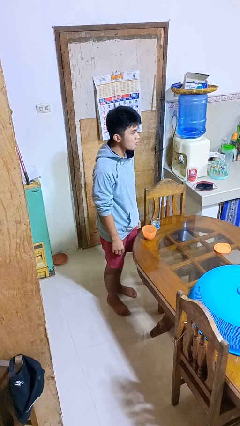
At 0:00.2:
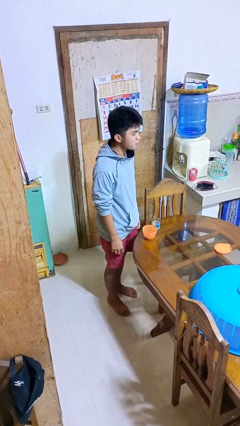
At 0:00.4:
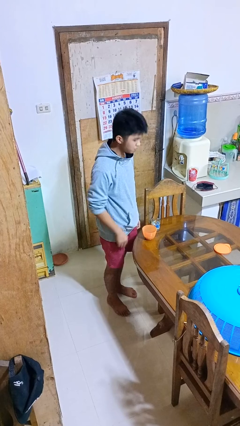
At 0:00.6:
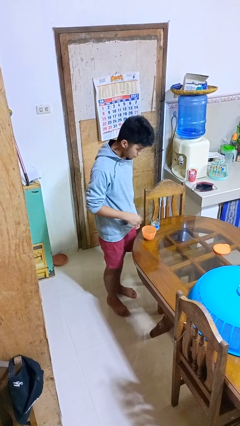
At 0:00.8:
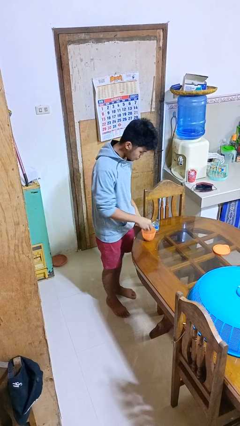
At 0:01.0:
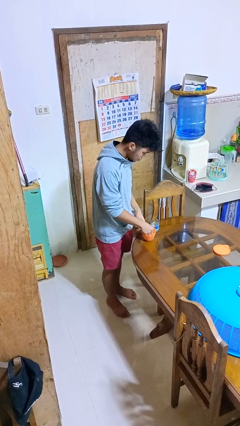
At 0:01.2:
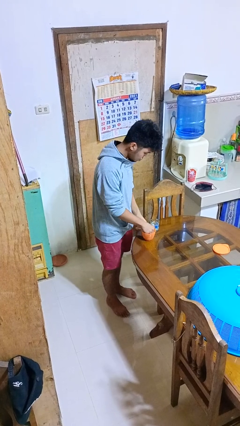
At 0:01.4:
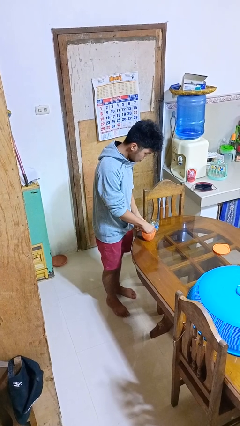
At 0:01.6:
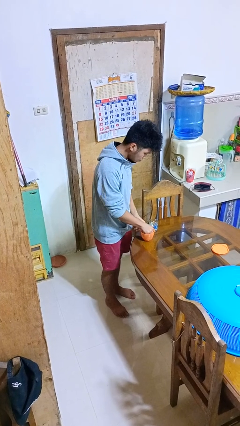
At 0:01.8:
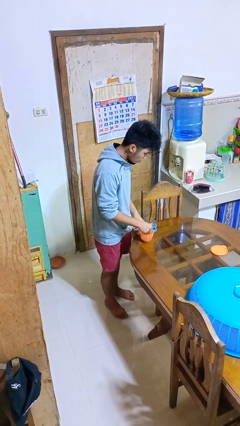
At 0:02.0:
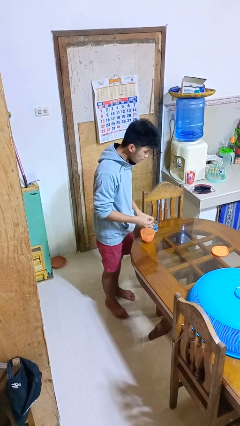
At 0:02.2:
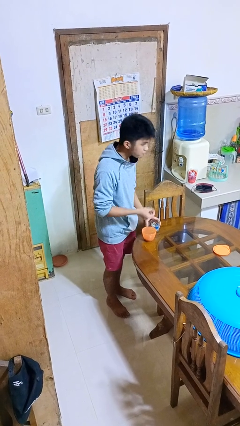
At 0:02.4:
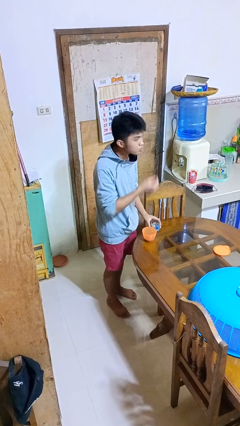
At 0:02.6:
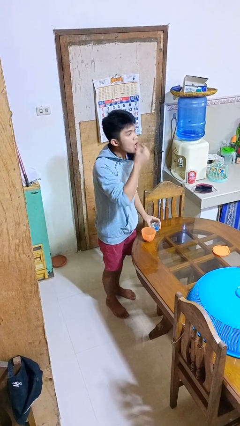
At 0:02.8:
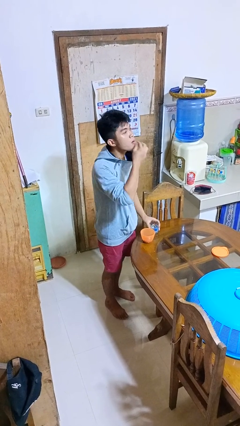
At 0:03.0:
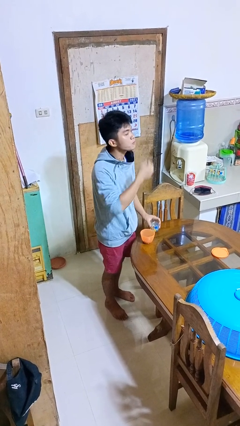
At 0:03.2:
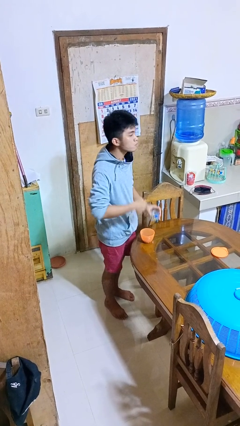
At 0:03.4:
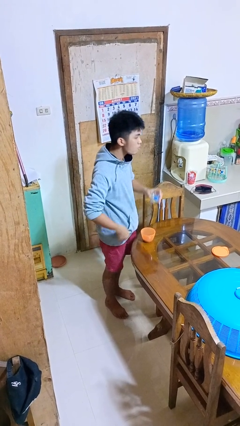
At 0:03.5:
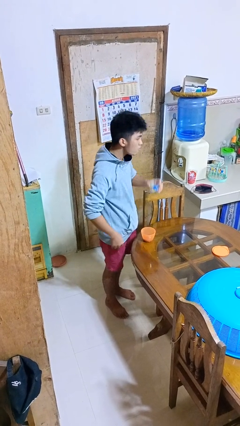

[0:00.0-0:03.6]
person takes medicine pills

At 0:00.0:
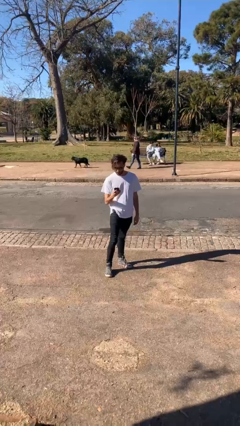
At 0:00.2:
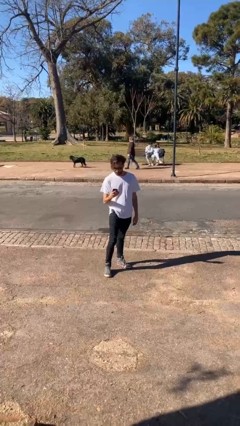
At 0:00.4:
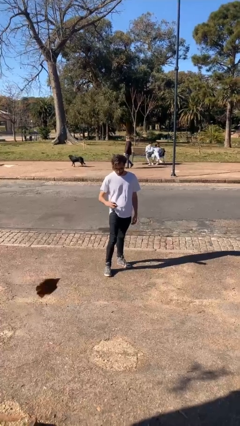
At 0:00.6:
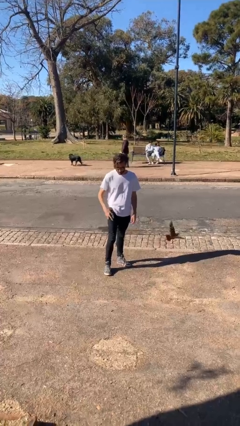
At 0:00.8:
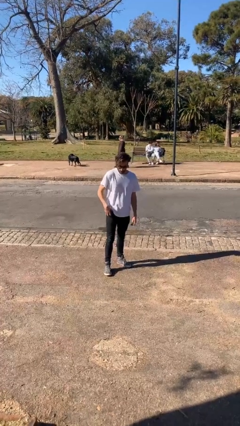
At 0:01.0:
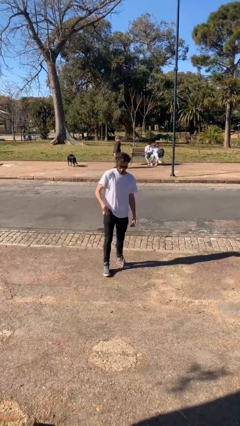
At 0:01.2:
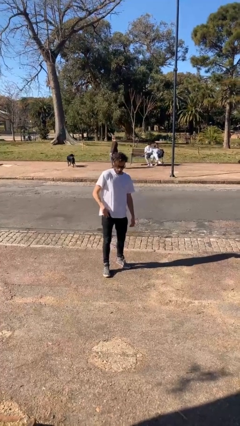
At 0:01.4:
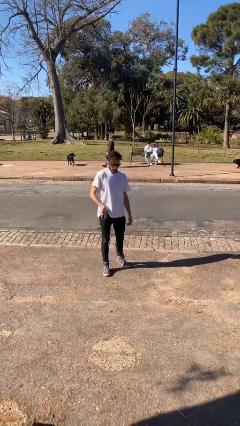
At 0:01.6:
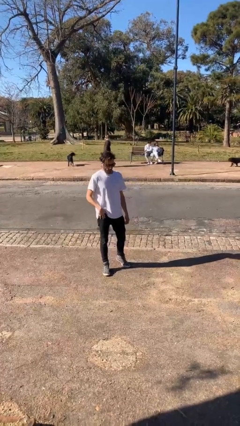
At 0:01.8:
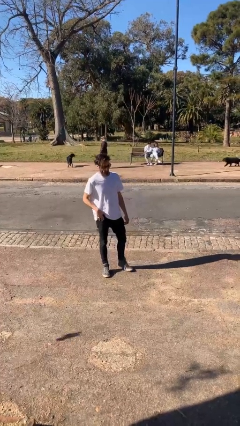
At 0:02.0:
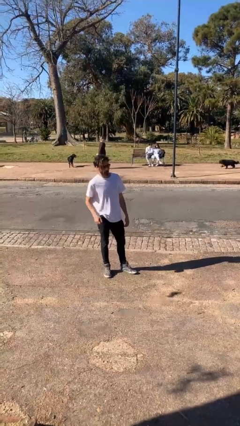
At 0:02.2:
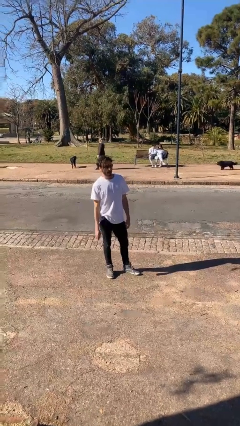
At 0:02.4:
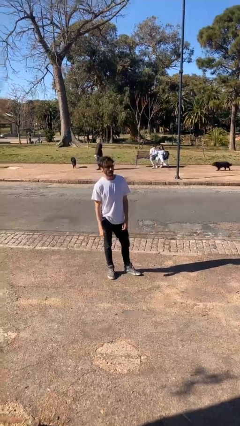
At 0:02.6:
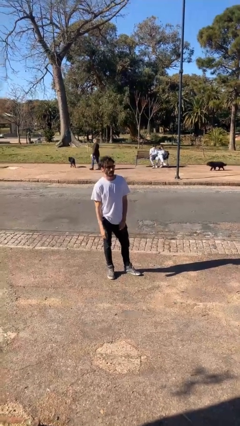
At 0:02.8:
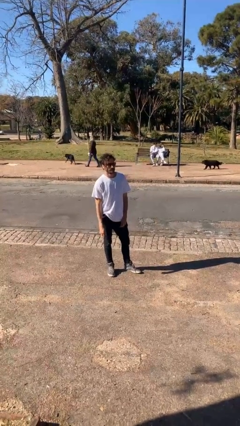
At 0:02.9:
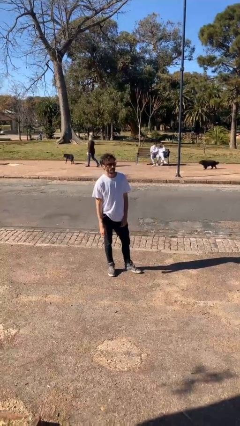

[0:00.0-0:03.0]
person puts phone into pocket

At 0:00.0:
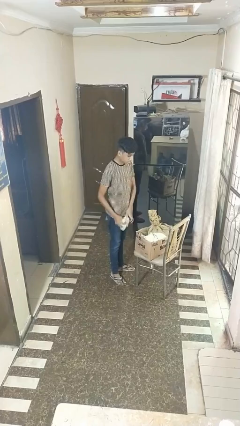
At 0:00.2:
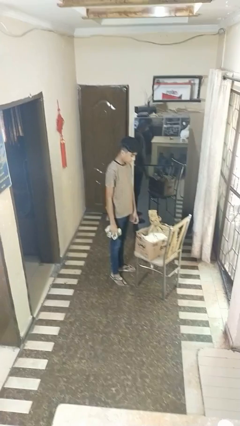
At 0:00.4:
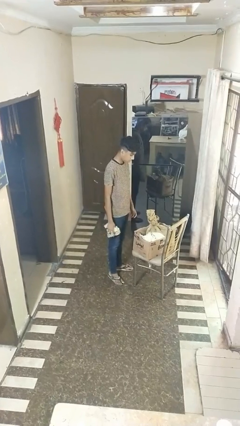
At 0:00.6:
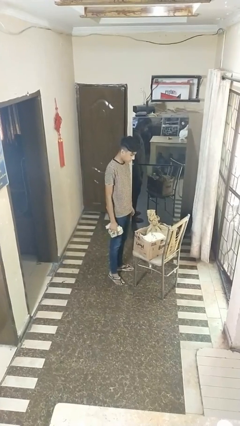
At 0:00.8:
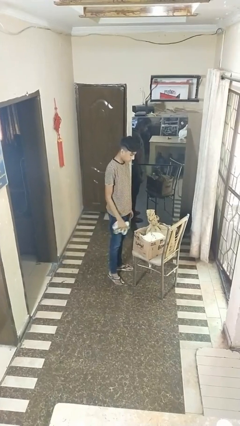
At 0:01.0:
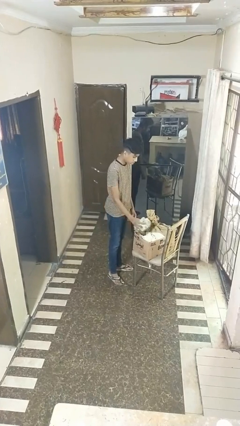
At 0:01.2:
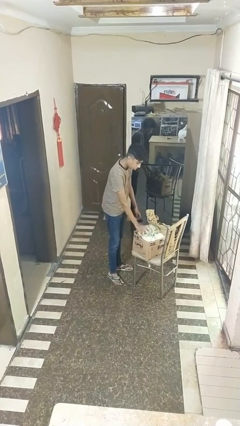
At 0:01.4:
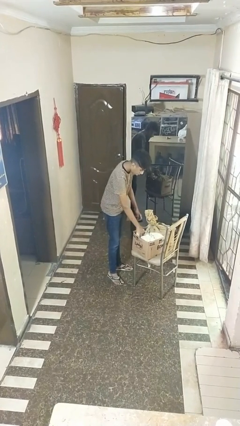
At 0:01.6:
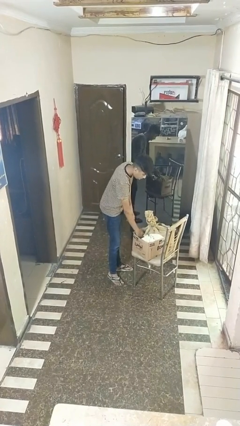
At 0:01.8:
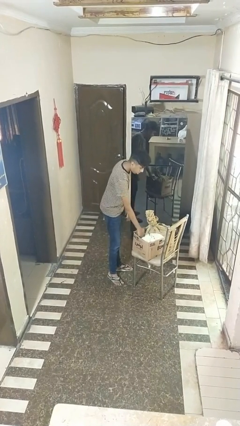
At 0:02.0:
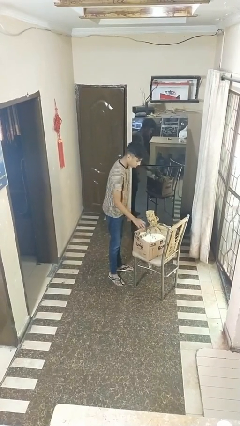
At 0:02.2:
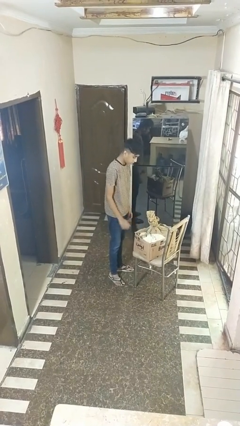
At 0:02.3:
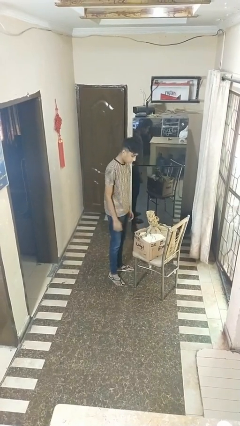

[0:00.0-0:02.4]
person puts object into box

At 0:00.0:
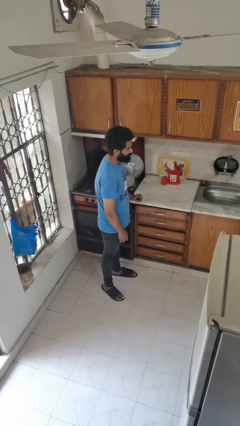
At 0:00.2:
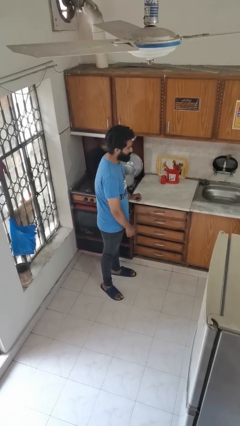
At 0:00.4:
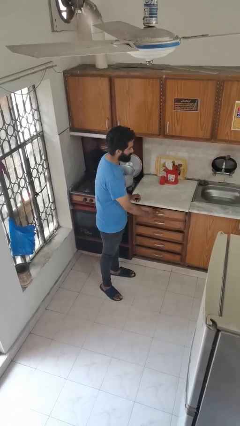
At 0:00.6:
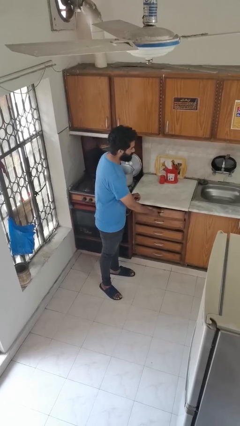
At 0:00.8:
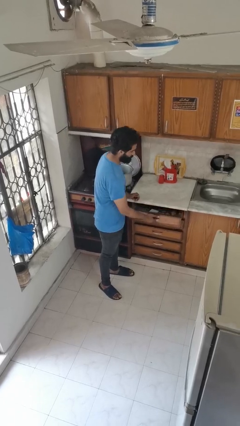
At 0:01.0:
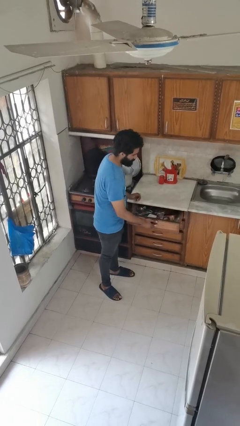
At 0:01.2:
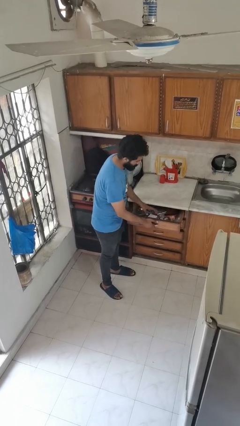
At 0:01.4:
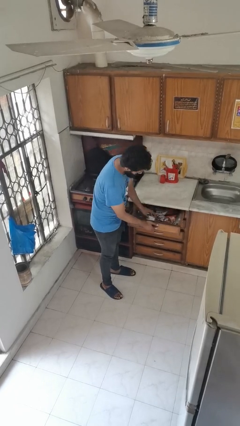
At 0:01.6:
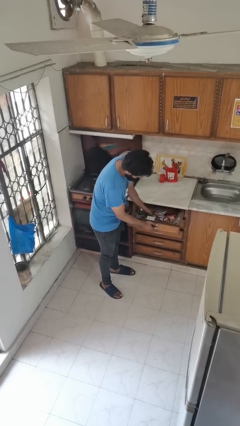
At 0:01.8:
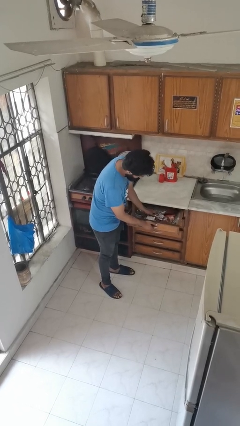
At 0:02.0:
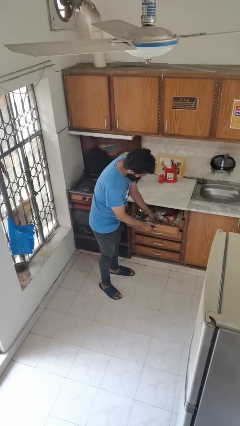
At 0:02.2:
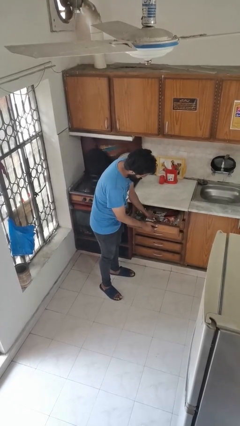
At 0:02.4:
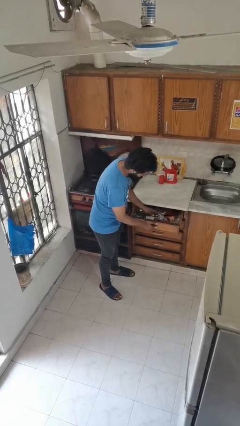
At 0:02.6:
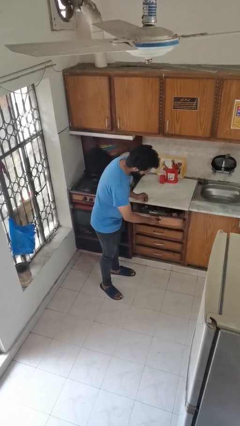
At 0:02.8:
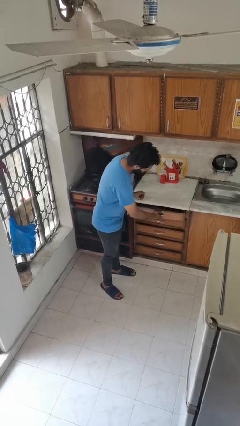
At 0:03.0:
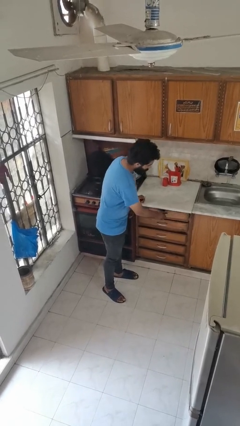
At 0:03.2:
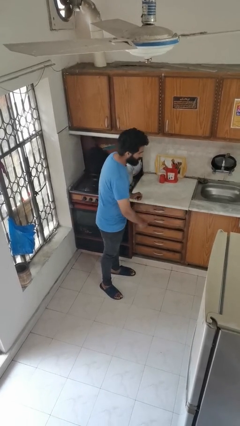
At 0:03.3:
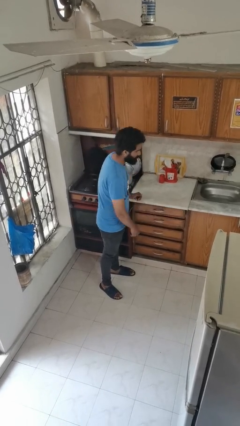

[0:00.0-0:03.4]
person searches in kitchen drawer

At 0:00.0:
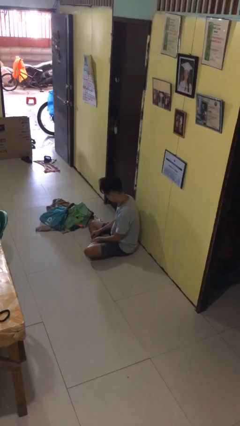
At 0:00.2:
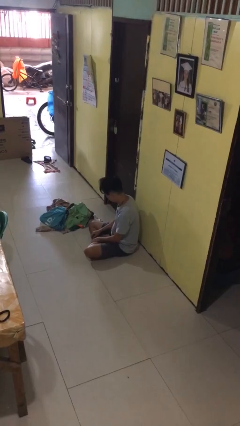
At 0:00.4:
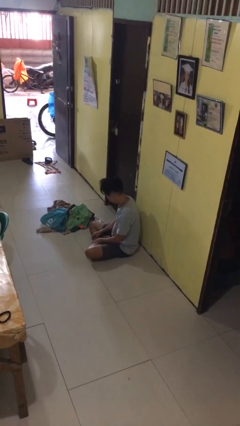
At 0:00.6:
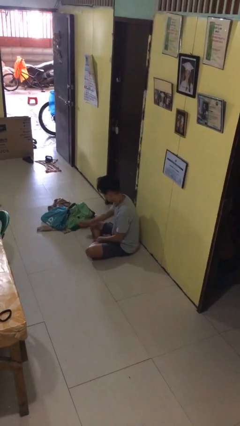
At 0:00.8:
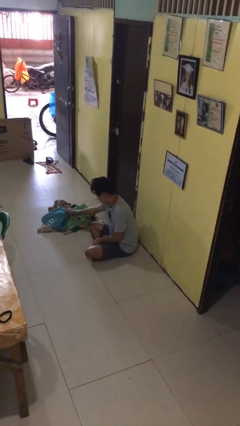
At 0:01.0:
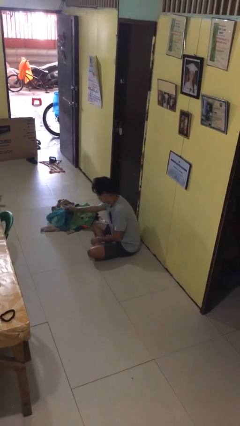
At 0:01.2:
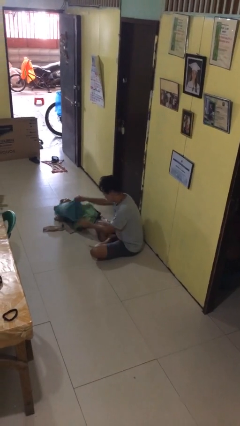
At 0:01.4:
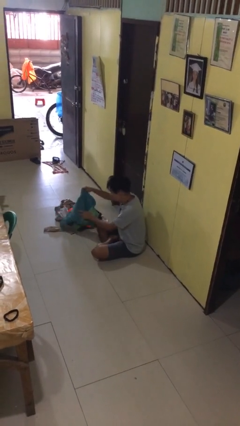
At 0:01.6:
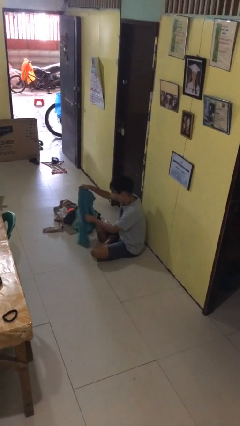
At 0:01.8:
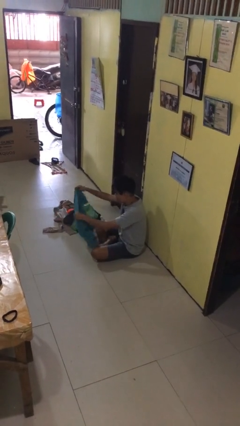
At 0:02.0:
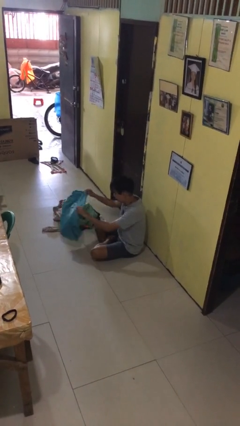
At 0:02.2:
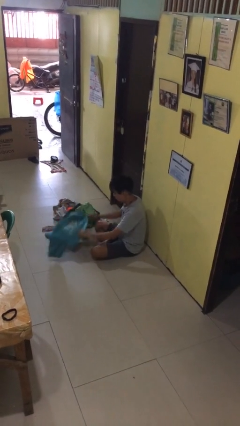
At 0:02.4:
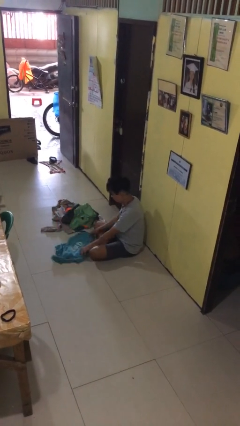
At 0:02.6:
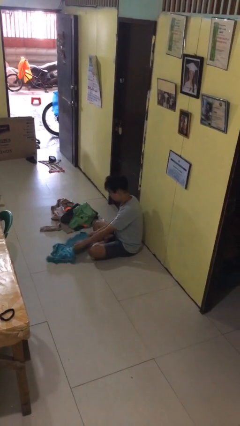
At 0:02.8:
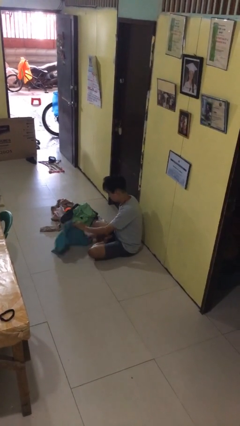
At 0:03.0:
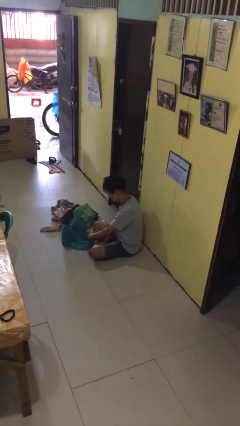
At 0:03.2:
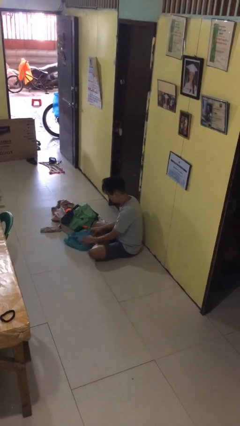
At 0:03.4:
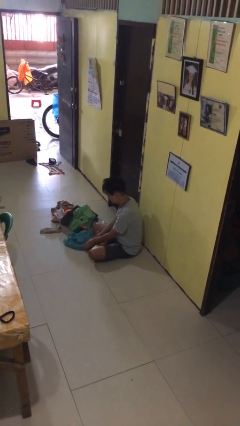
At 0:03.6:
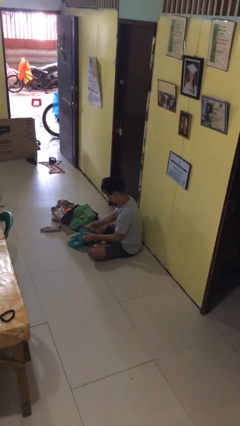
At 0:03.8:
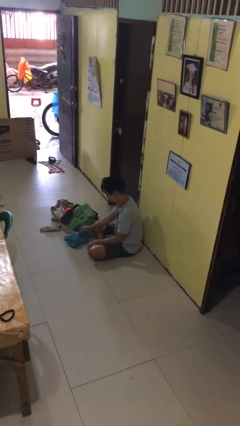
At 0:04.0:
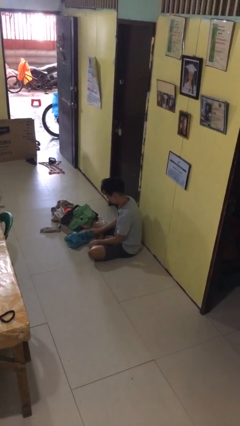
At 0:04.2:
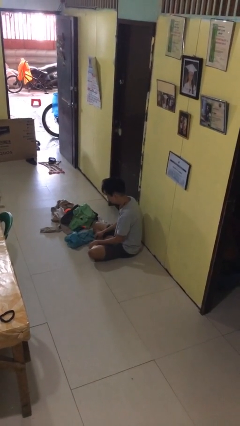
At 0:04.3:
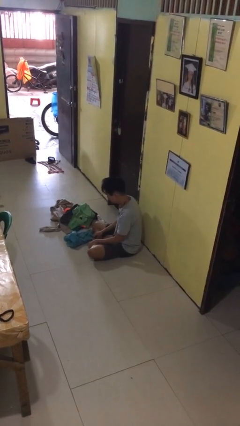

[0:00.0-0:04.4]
person folds shirt

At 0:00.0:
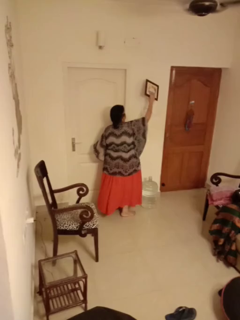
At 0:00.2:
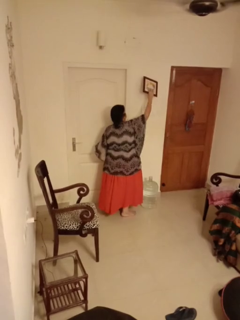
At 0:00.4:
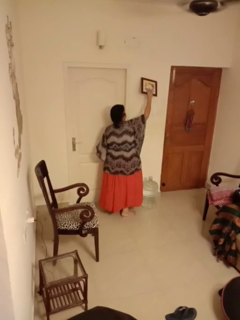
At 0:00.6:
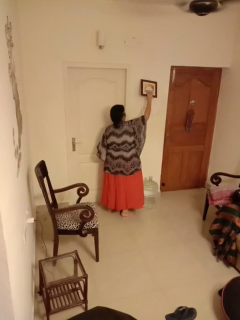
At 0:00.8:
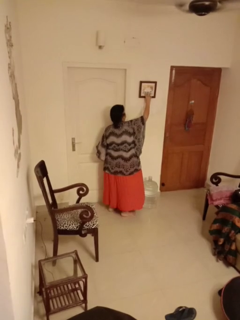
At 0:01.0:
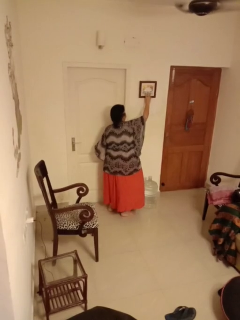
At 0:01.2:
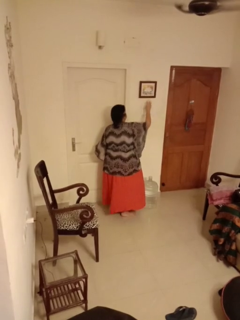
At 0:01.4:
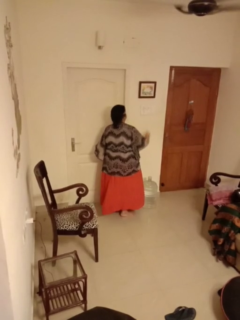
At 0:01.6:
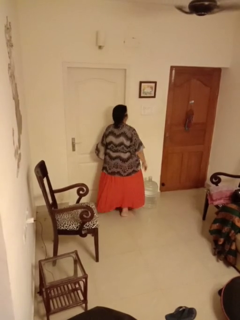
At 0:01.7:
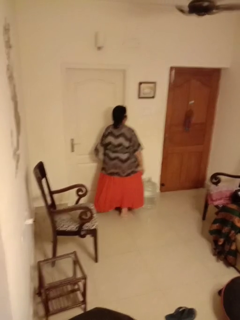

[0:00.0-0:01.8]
person puts up picture frame
